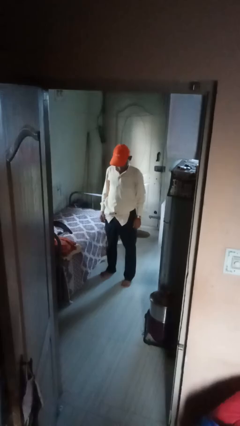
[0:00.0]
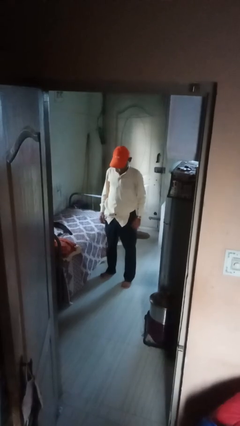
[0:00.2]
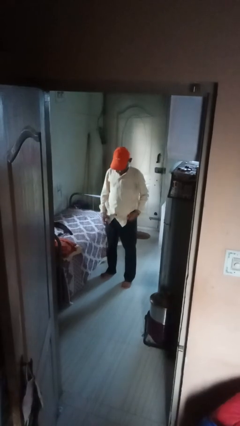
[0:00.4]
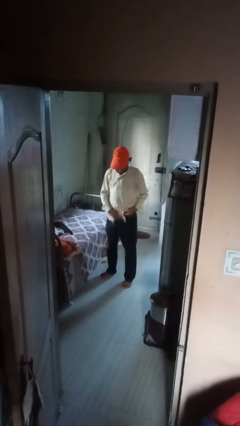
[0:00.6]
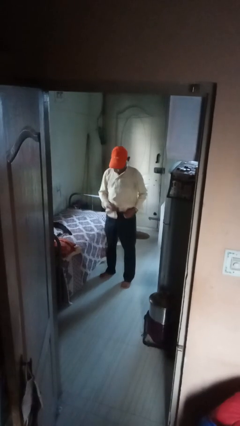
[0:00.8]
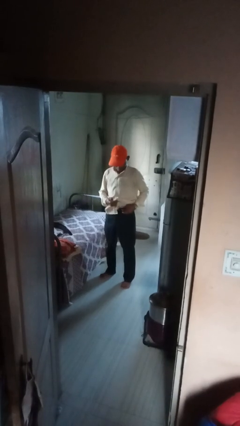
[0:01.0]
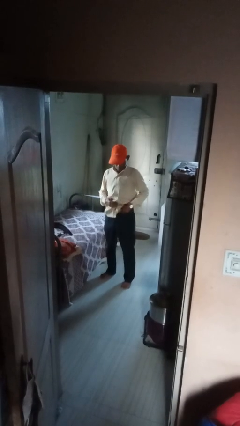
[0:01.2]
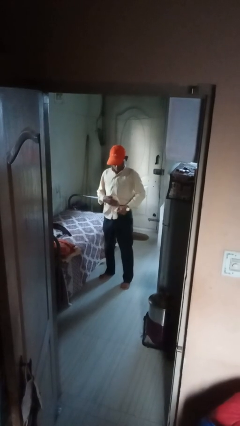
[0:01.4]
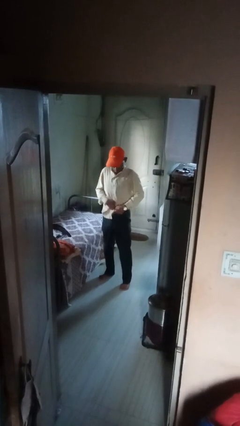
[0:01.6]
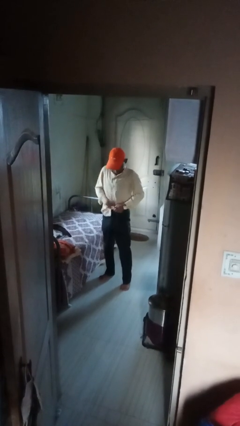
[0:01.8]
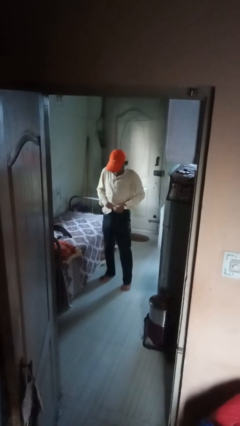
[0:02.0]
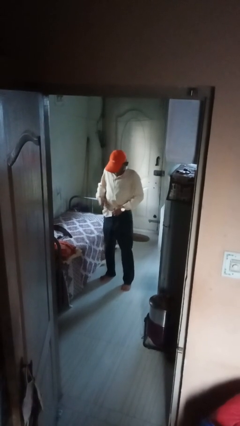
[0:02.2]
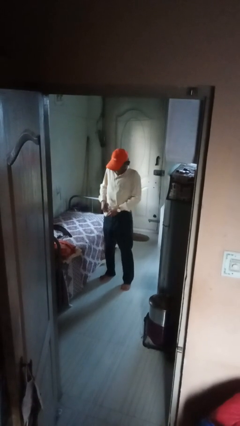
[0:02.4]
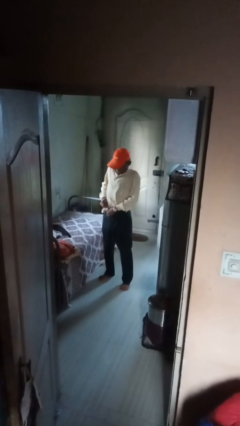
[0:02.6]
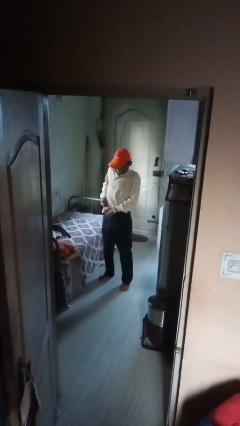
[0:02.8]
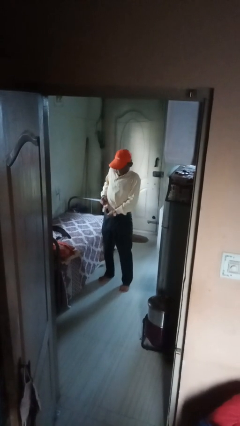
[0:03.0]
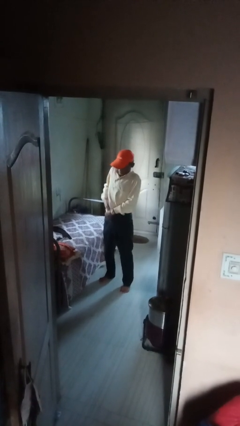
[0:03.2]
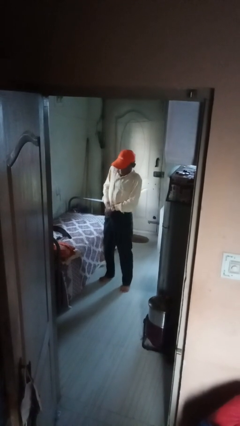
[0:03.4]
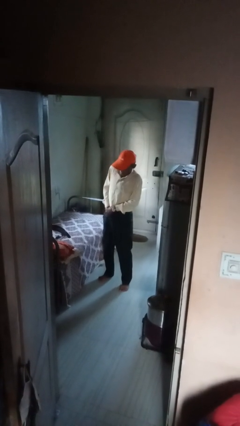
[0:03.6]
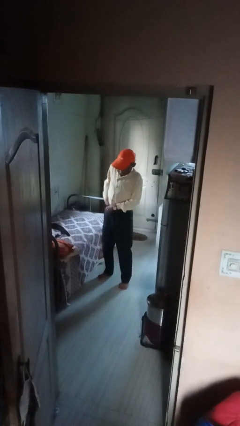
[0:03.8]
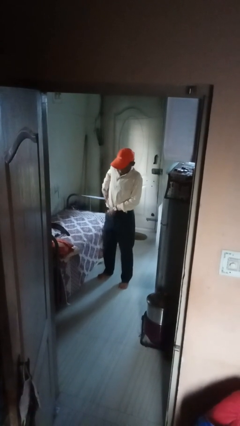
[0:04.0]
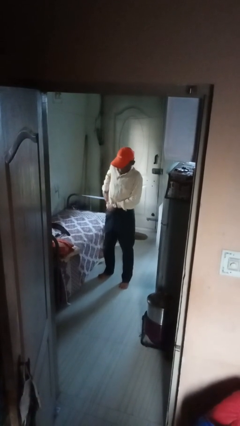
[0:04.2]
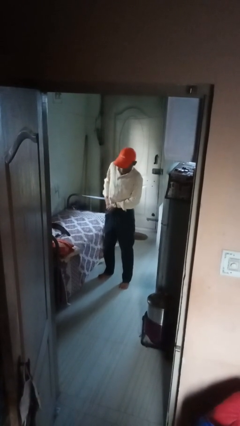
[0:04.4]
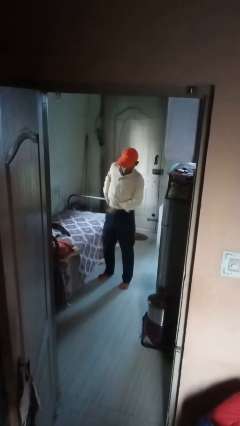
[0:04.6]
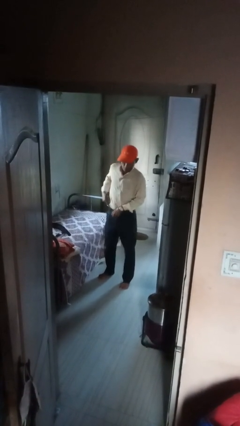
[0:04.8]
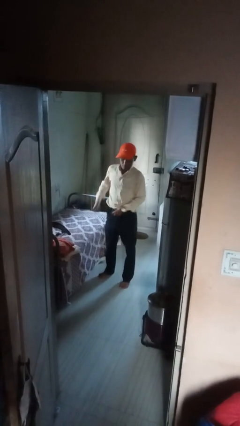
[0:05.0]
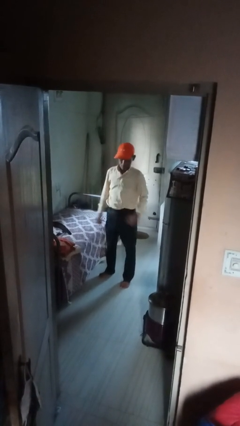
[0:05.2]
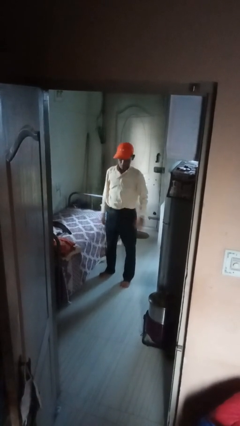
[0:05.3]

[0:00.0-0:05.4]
person tucks in shirt

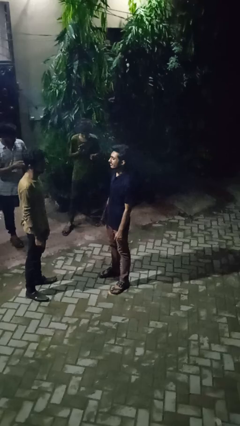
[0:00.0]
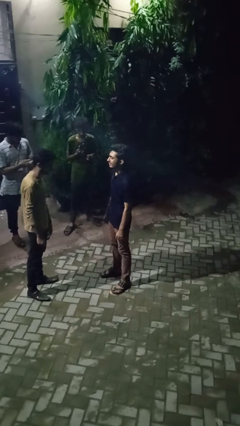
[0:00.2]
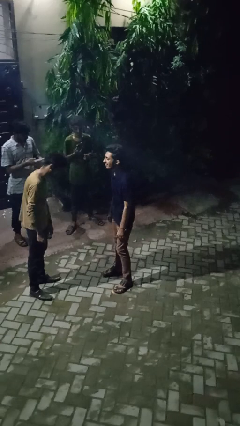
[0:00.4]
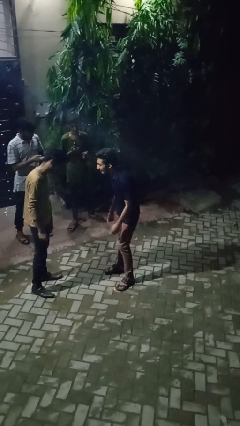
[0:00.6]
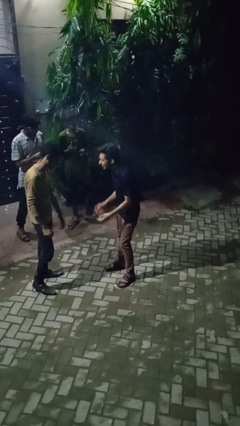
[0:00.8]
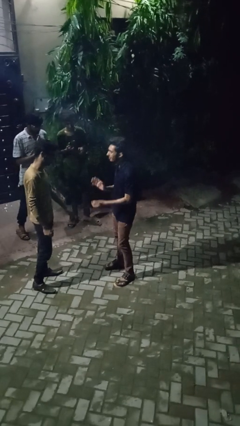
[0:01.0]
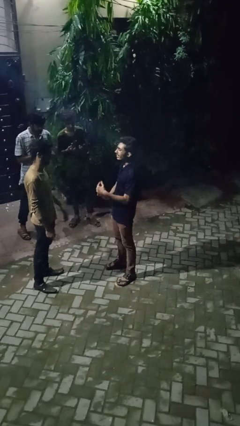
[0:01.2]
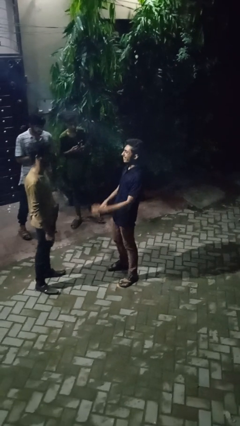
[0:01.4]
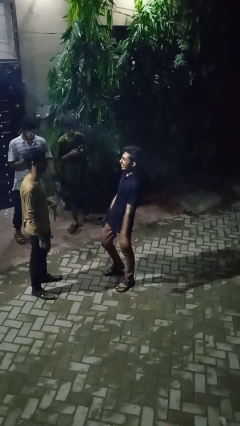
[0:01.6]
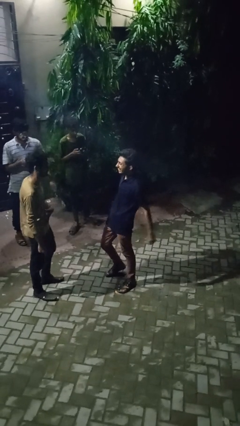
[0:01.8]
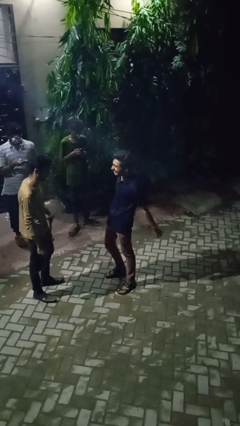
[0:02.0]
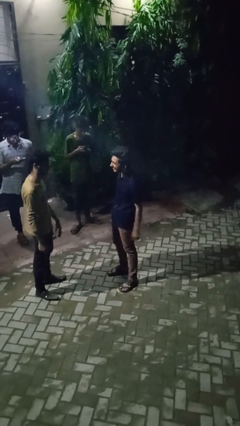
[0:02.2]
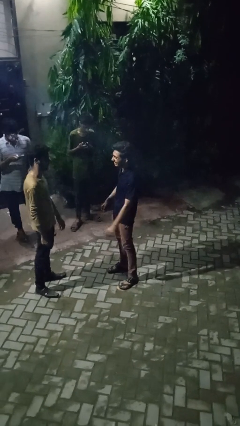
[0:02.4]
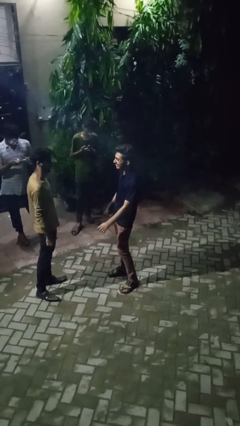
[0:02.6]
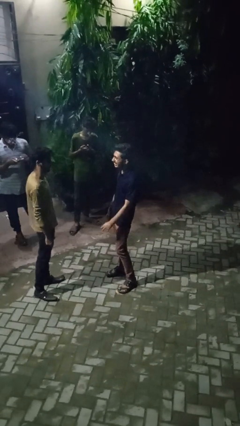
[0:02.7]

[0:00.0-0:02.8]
person laughs with person

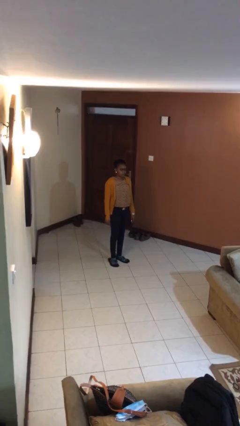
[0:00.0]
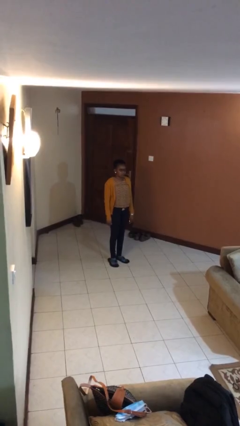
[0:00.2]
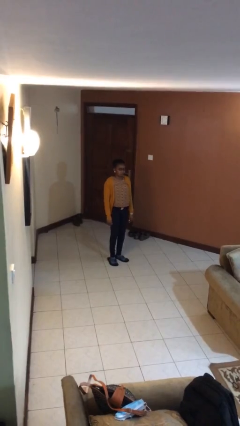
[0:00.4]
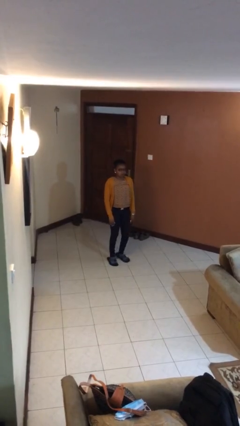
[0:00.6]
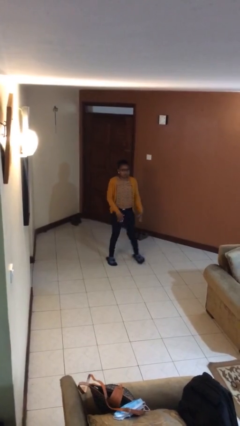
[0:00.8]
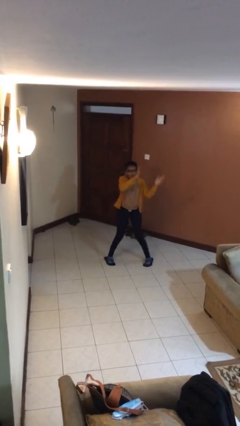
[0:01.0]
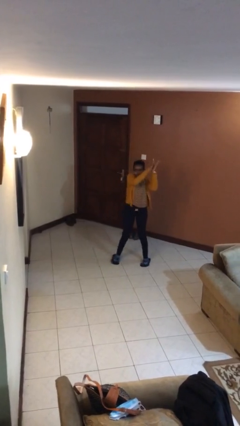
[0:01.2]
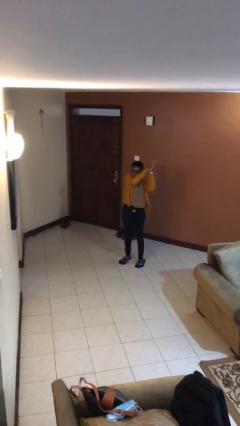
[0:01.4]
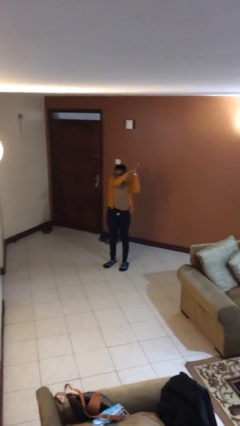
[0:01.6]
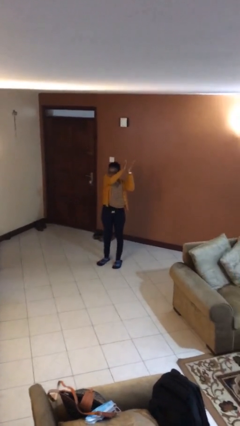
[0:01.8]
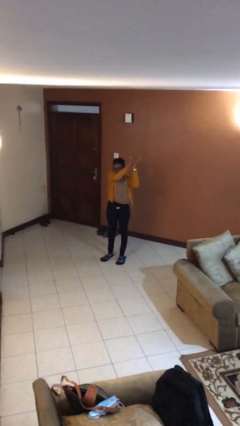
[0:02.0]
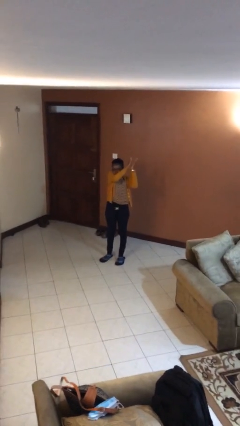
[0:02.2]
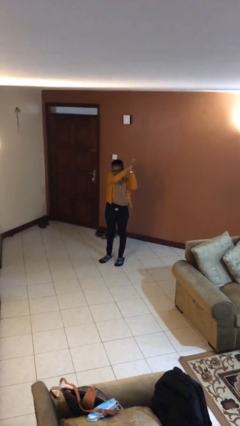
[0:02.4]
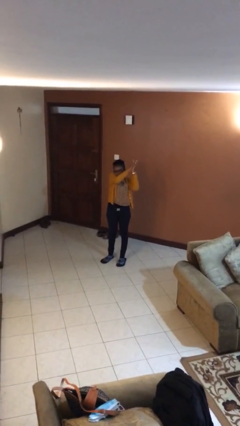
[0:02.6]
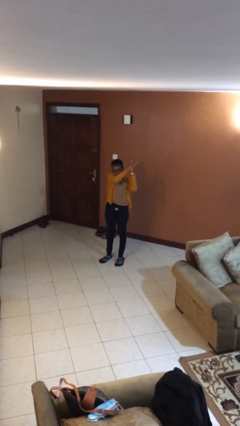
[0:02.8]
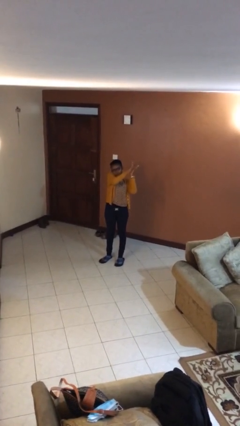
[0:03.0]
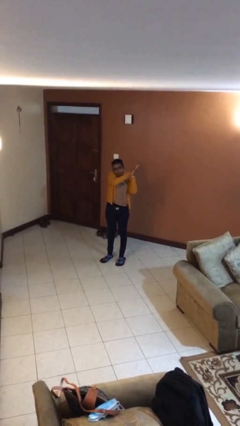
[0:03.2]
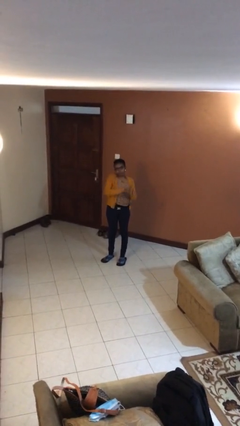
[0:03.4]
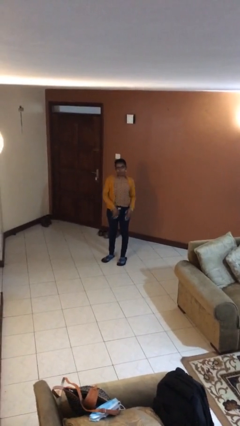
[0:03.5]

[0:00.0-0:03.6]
person claps hands

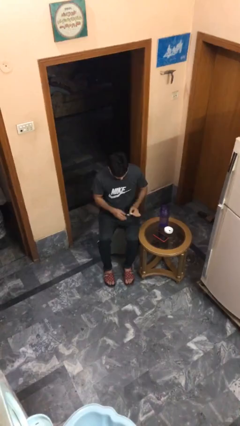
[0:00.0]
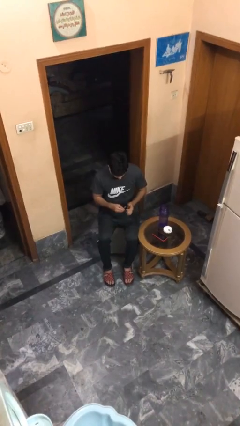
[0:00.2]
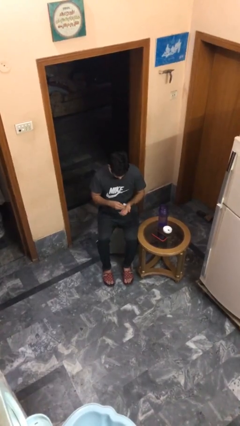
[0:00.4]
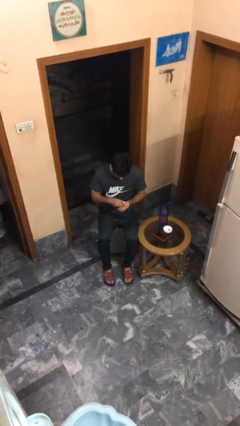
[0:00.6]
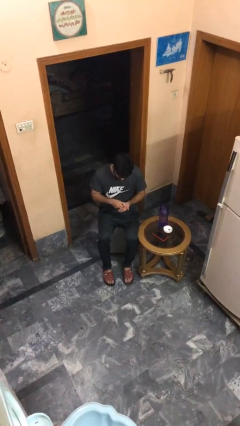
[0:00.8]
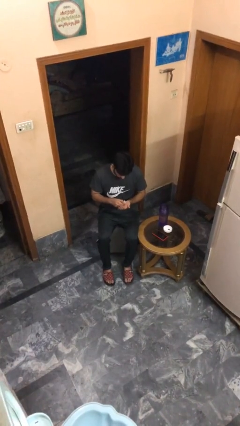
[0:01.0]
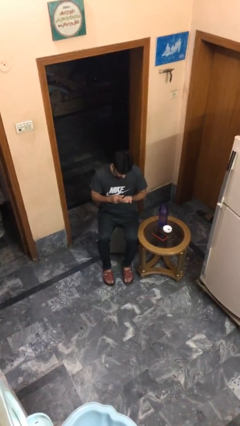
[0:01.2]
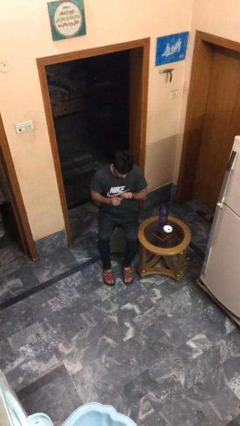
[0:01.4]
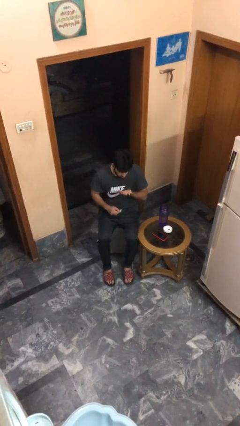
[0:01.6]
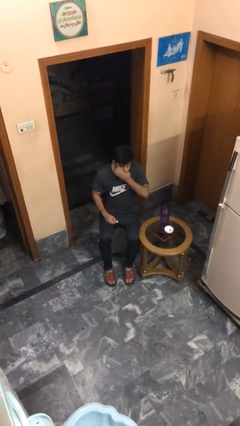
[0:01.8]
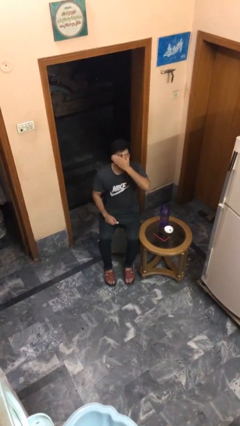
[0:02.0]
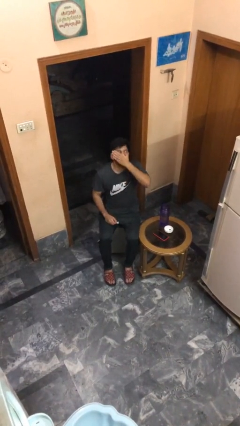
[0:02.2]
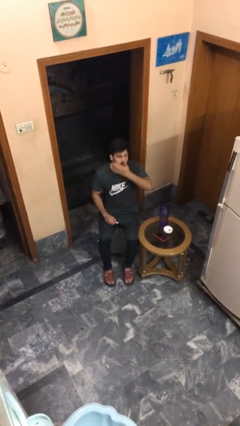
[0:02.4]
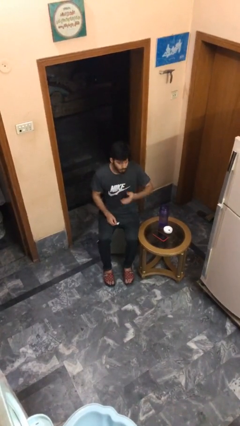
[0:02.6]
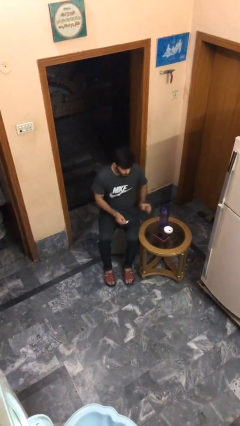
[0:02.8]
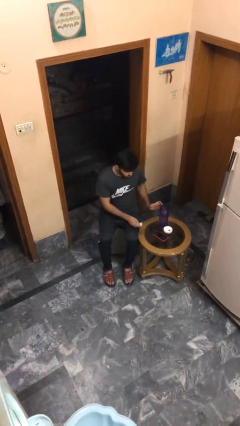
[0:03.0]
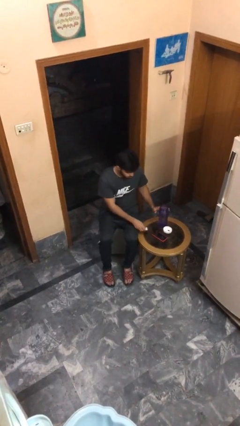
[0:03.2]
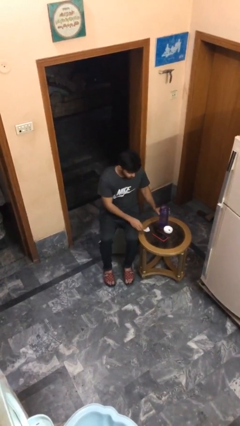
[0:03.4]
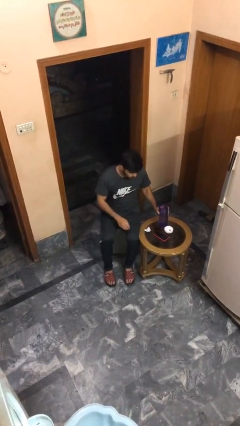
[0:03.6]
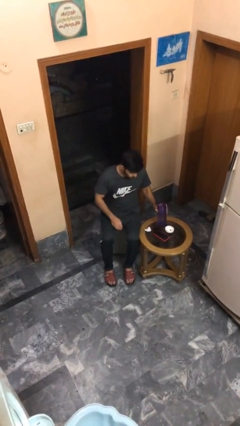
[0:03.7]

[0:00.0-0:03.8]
person takes medicine pills

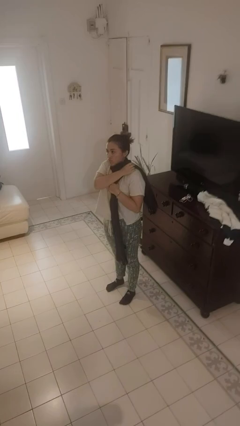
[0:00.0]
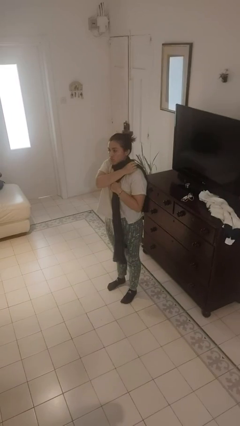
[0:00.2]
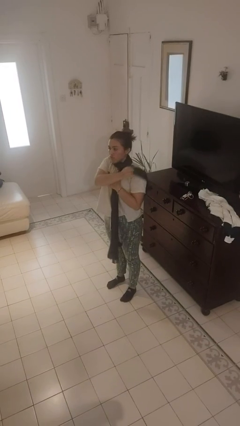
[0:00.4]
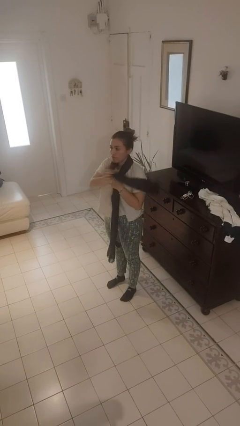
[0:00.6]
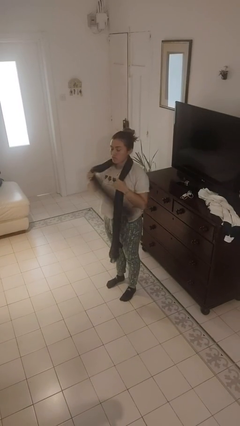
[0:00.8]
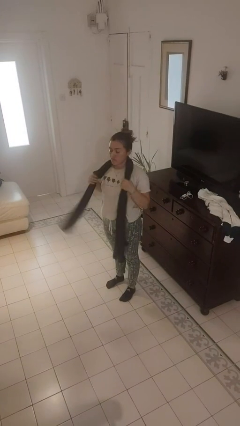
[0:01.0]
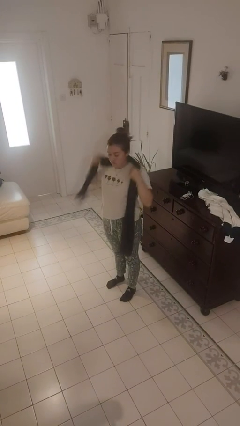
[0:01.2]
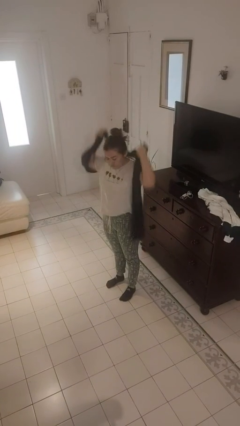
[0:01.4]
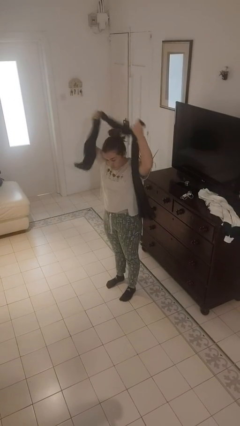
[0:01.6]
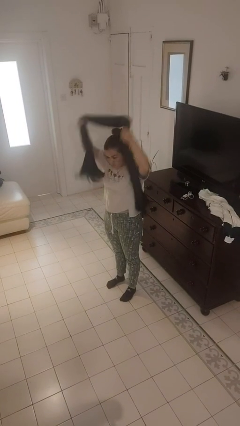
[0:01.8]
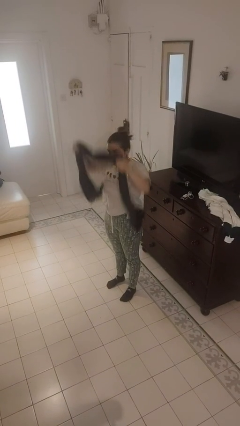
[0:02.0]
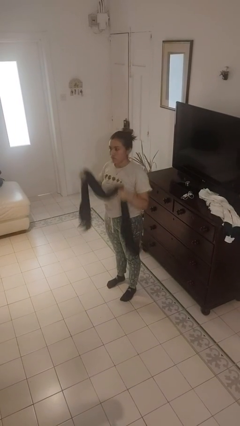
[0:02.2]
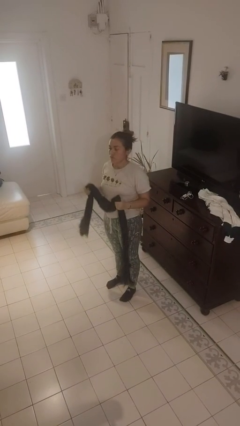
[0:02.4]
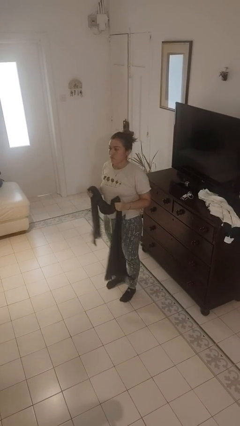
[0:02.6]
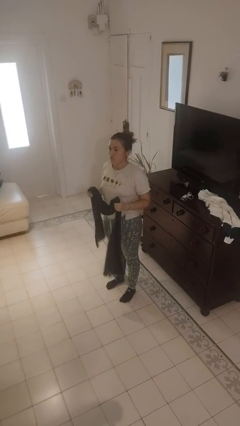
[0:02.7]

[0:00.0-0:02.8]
person takes off scarf
